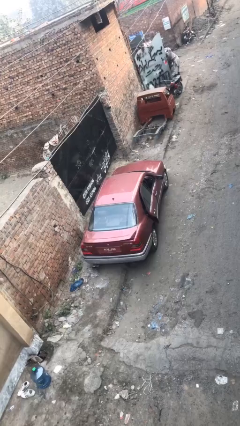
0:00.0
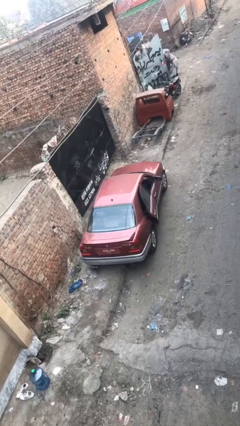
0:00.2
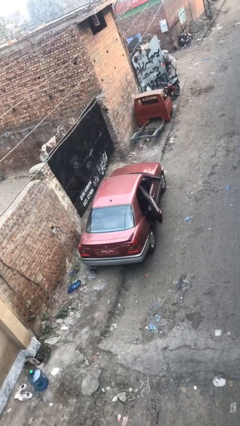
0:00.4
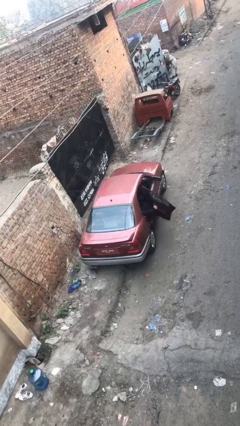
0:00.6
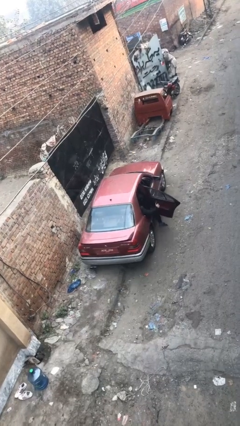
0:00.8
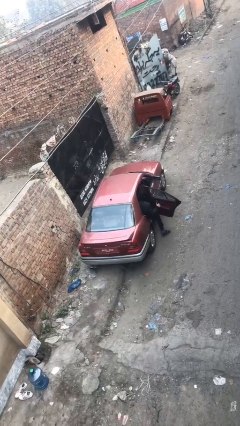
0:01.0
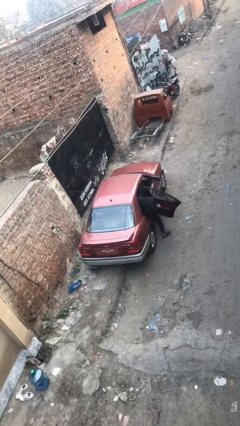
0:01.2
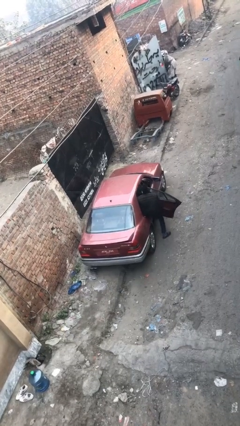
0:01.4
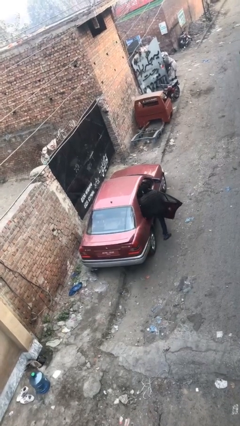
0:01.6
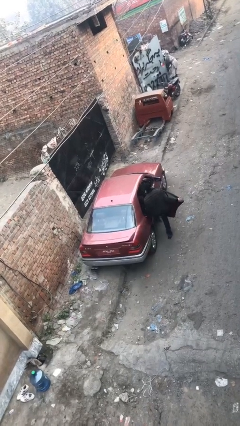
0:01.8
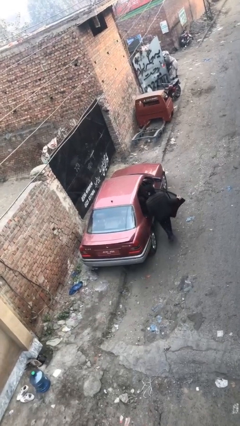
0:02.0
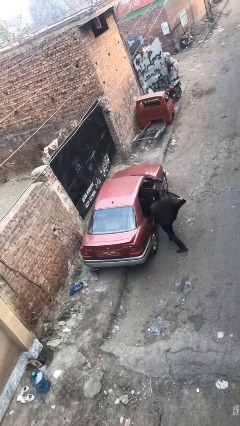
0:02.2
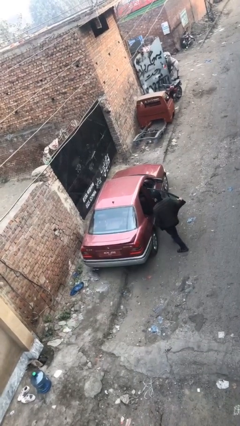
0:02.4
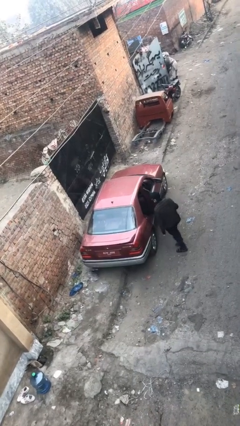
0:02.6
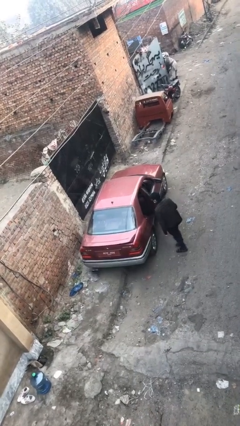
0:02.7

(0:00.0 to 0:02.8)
car drops off person

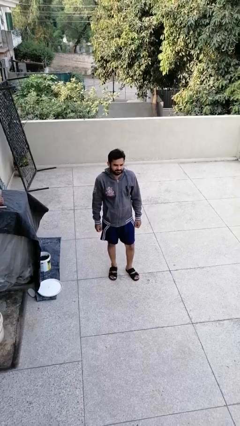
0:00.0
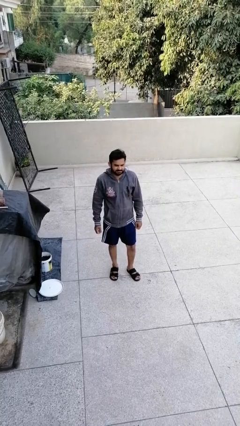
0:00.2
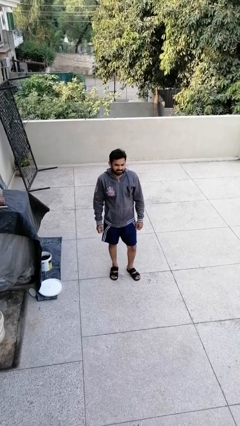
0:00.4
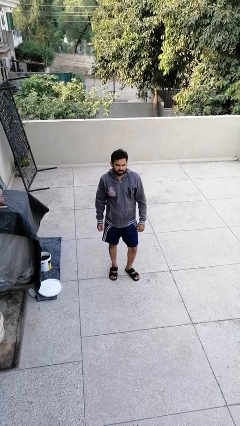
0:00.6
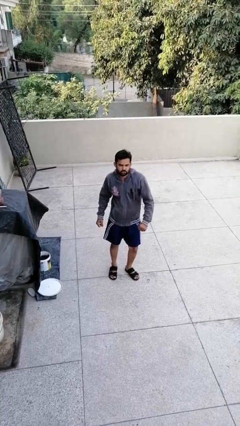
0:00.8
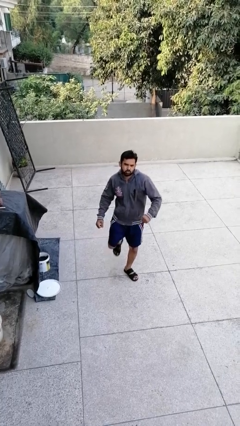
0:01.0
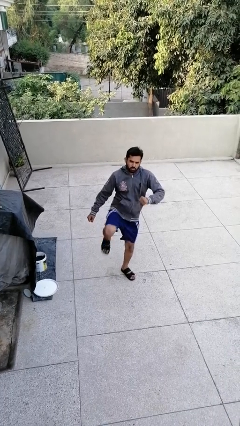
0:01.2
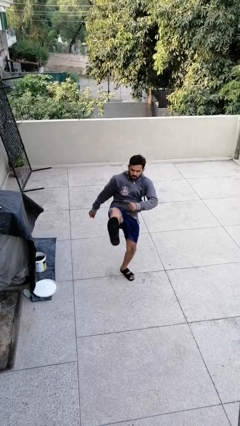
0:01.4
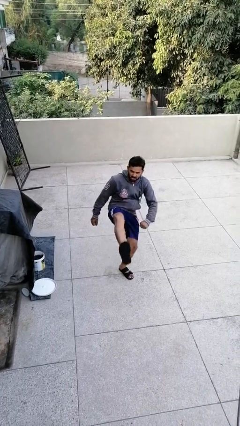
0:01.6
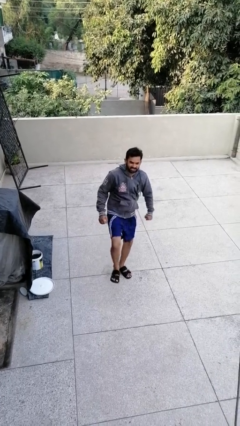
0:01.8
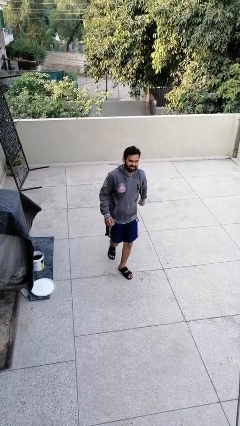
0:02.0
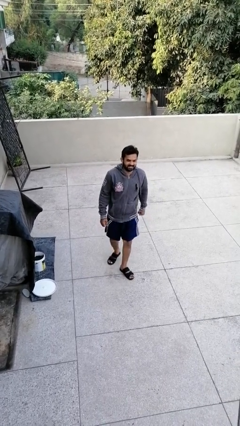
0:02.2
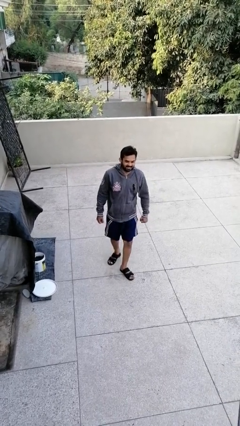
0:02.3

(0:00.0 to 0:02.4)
person karate kicks

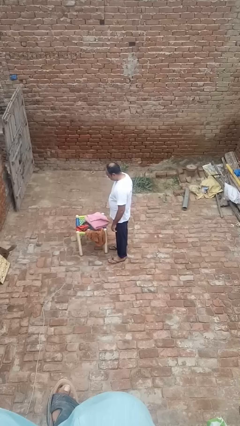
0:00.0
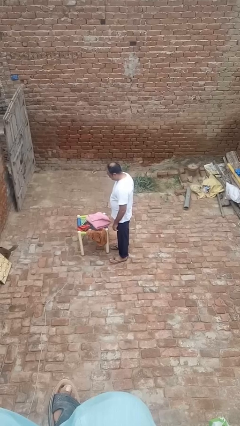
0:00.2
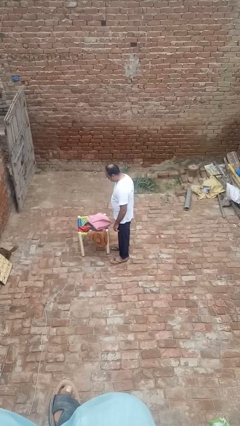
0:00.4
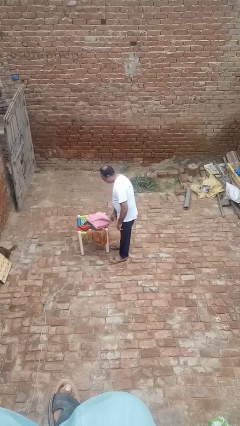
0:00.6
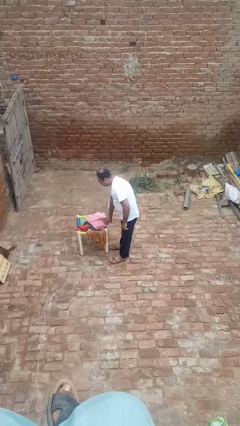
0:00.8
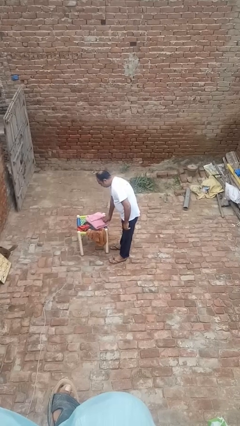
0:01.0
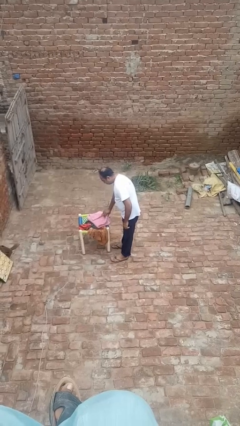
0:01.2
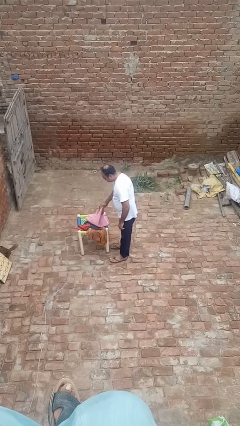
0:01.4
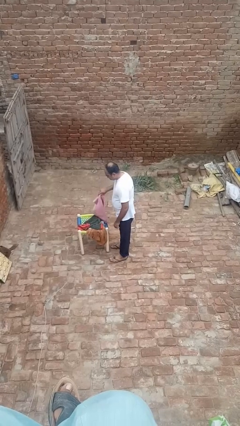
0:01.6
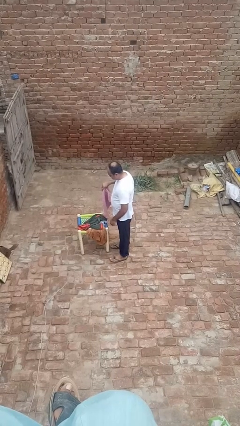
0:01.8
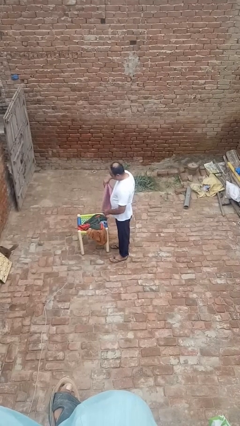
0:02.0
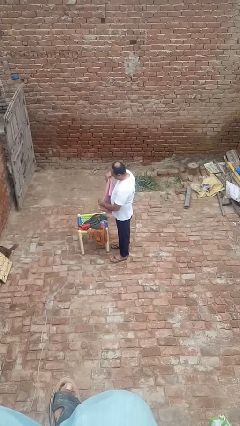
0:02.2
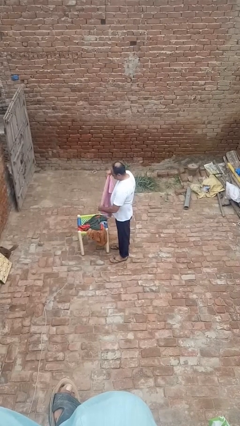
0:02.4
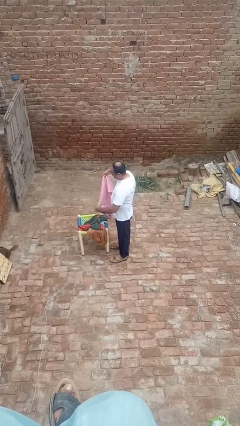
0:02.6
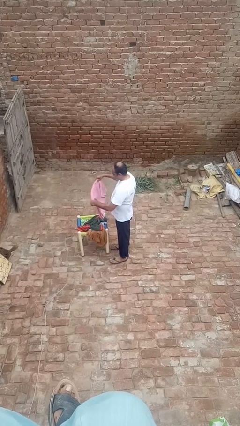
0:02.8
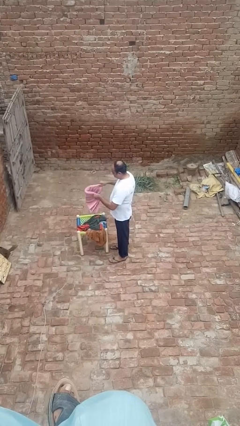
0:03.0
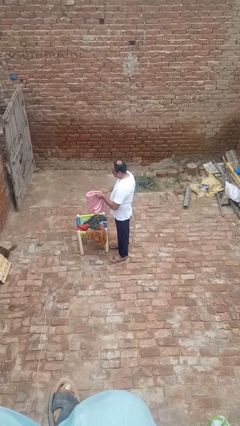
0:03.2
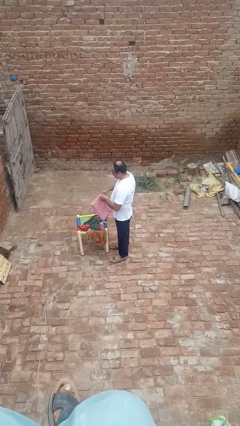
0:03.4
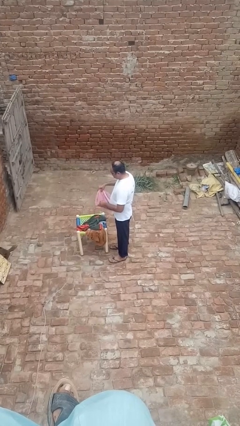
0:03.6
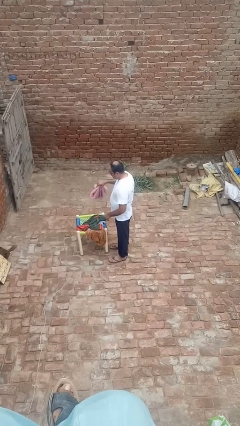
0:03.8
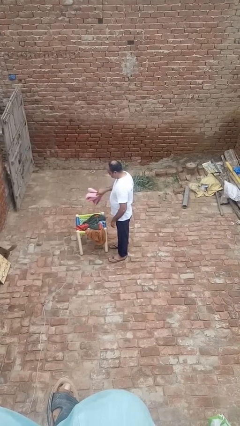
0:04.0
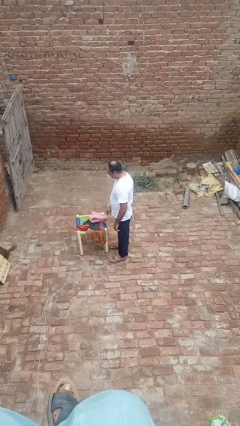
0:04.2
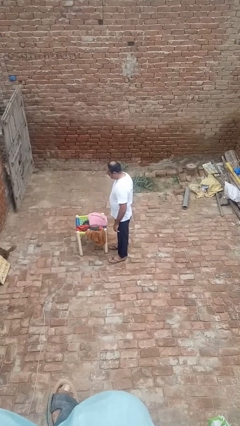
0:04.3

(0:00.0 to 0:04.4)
person folds towel

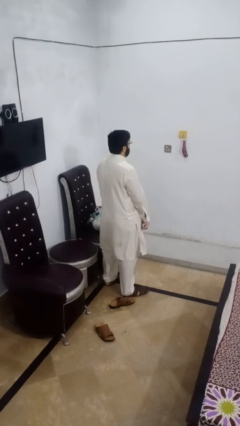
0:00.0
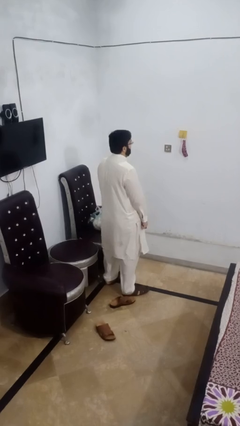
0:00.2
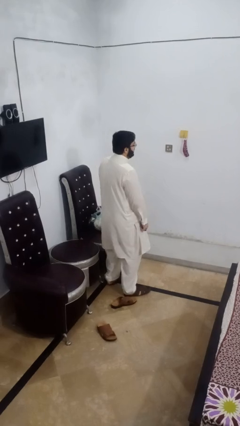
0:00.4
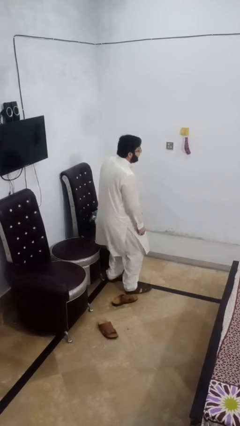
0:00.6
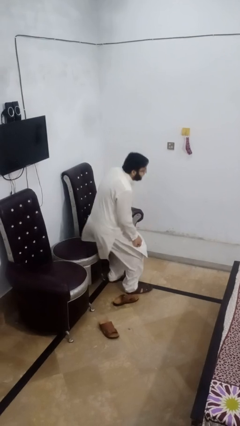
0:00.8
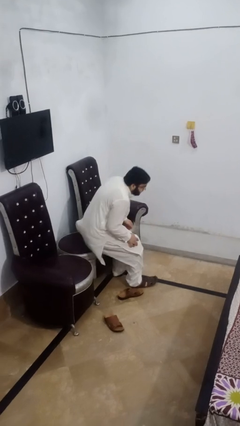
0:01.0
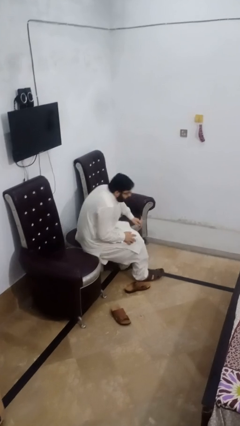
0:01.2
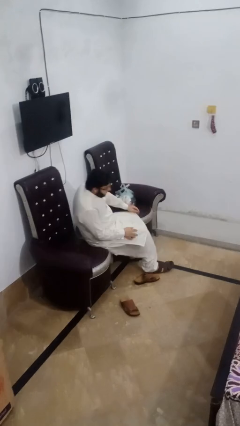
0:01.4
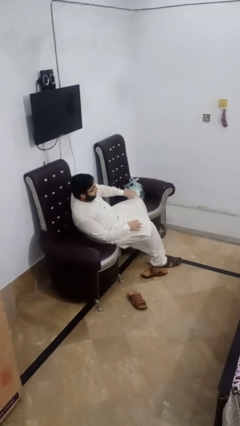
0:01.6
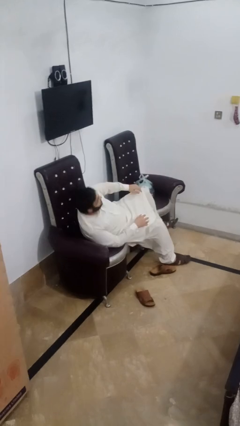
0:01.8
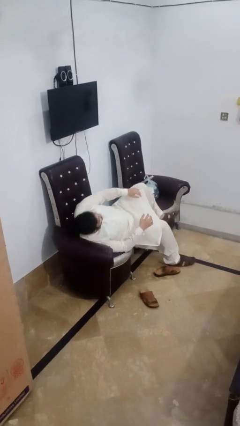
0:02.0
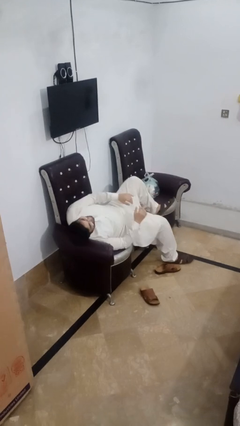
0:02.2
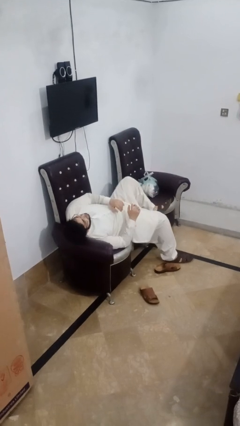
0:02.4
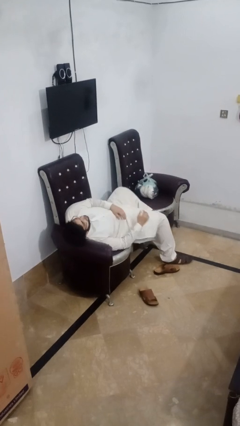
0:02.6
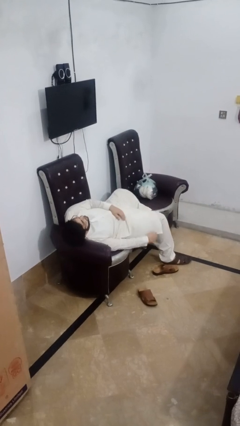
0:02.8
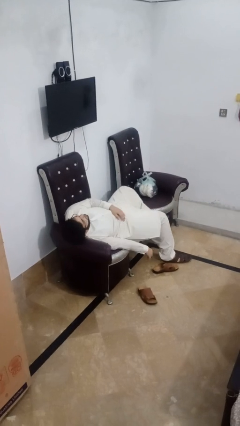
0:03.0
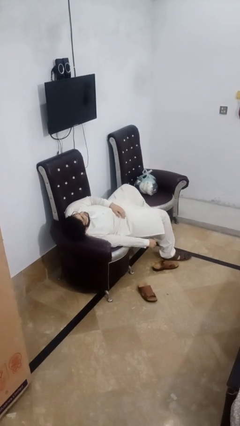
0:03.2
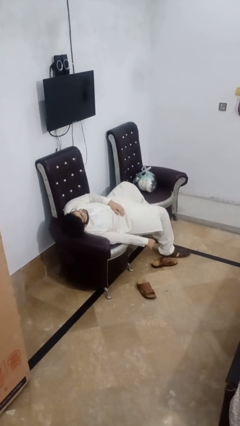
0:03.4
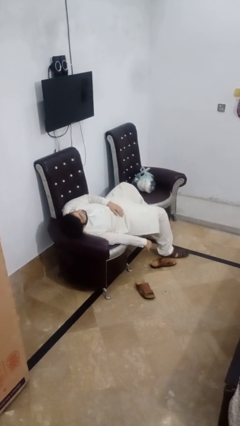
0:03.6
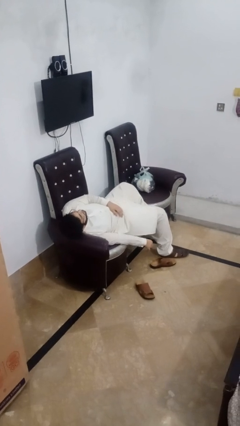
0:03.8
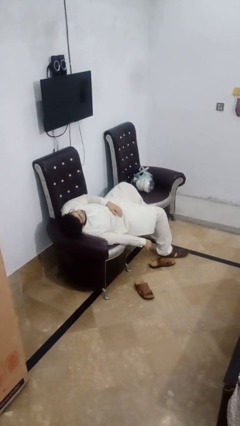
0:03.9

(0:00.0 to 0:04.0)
person lies down on couch

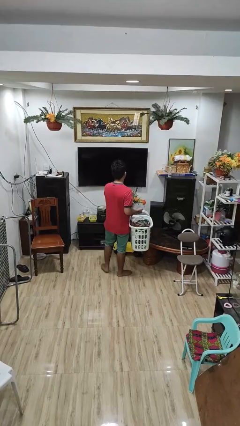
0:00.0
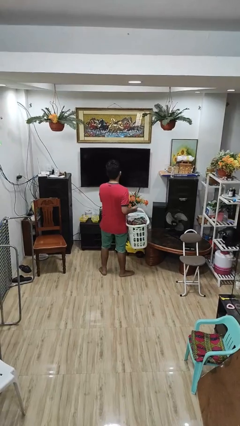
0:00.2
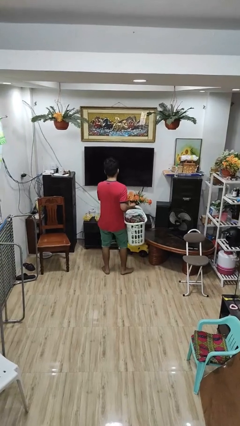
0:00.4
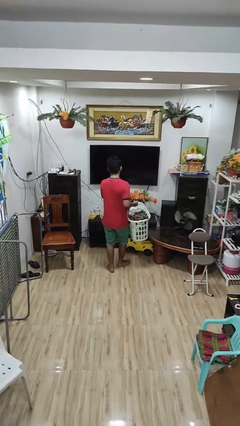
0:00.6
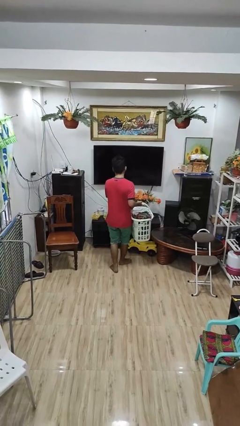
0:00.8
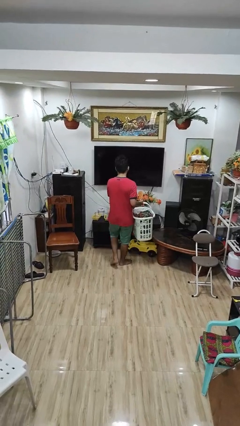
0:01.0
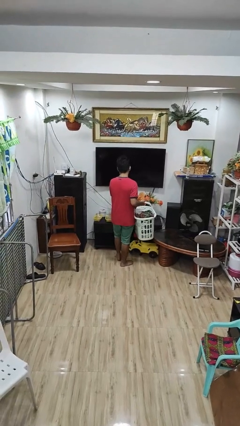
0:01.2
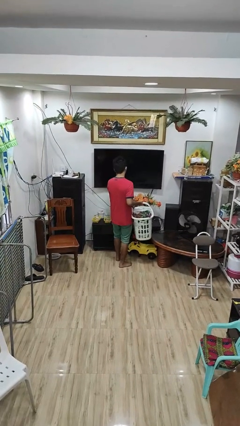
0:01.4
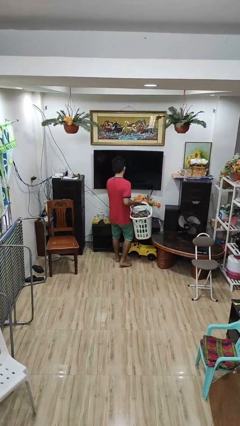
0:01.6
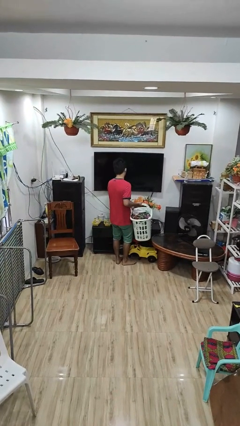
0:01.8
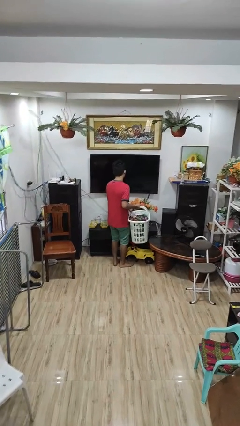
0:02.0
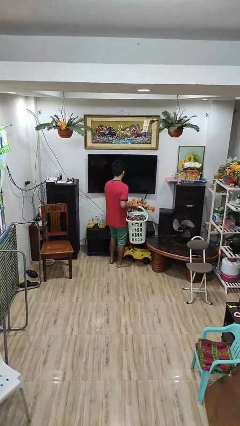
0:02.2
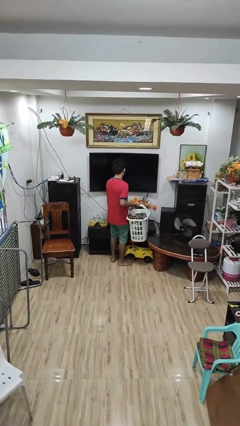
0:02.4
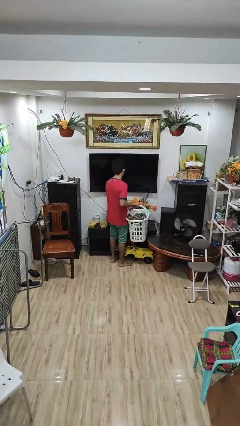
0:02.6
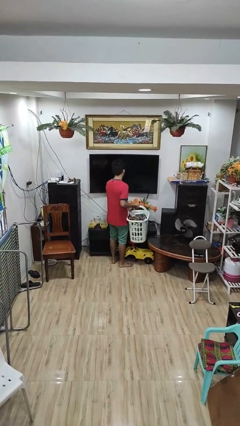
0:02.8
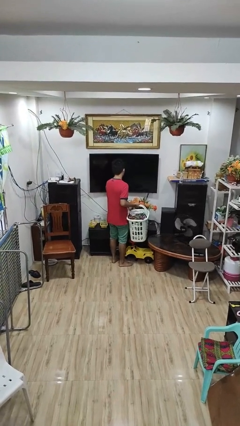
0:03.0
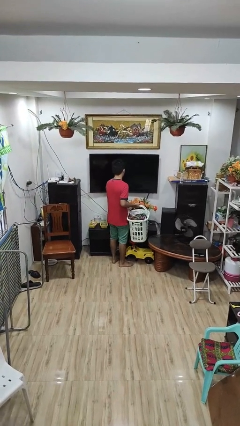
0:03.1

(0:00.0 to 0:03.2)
person carries laundry basket

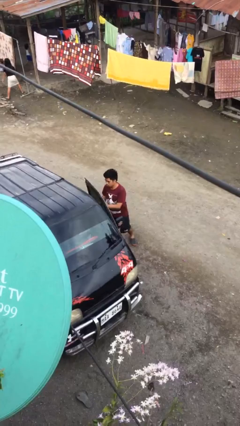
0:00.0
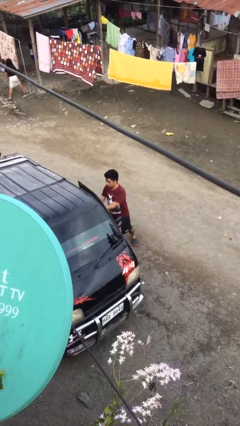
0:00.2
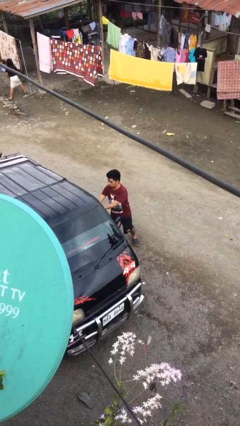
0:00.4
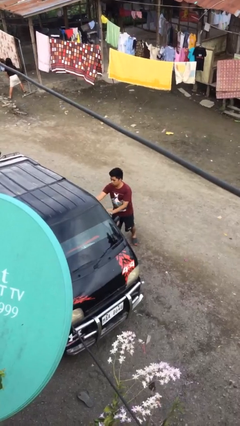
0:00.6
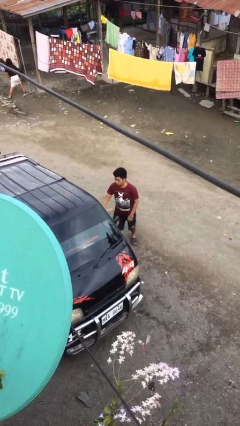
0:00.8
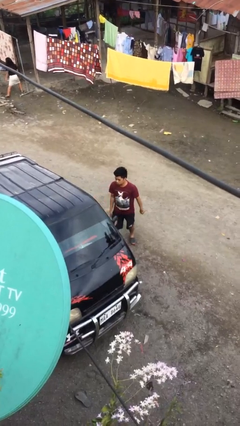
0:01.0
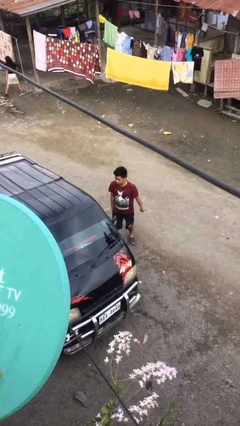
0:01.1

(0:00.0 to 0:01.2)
person closes car door
